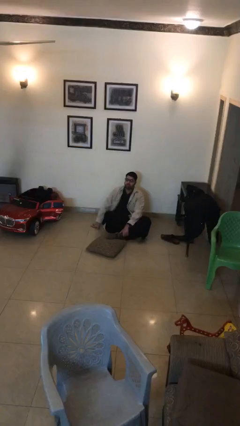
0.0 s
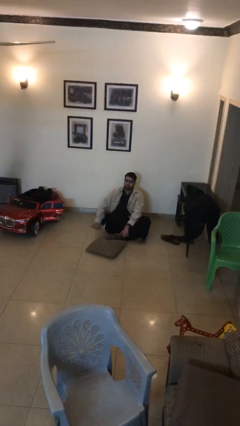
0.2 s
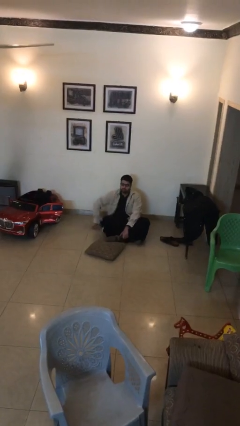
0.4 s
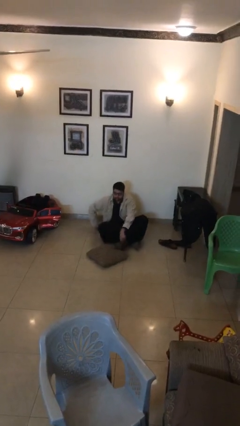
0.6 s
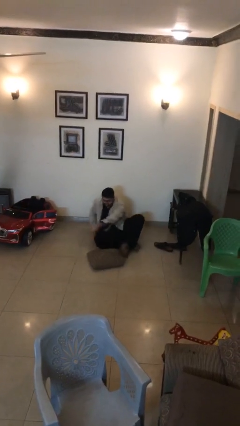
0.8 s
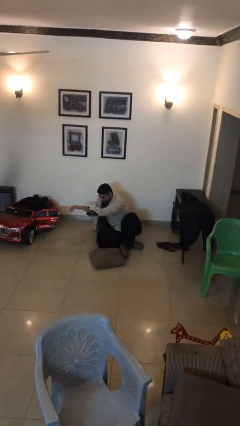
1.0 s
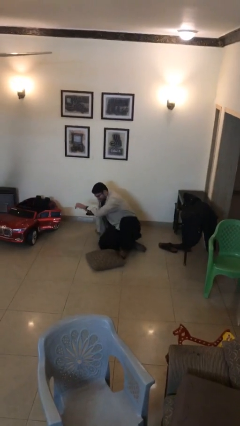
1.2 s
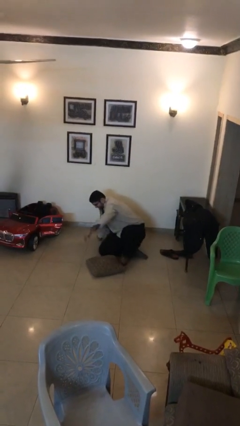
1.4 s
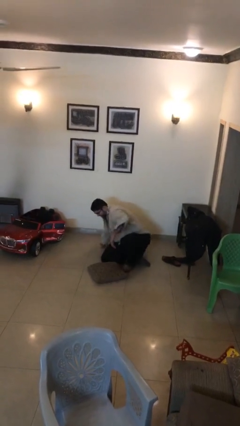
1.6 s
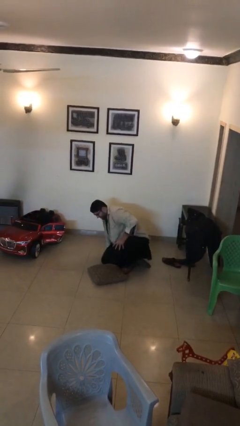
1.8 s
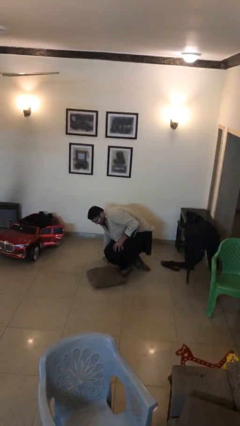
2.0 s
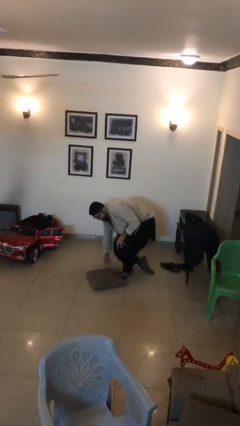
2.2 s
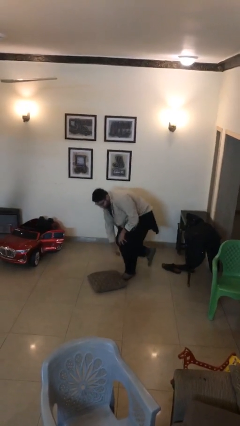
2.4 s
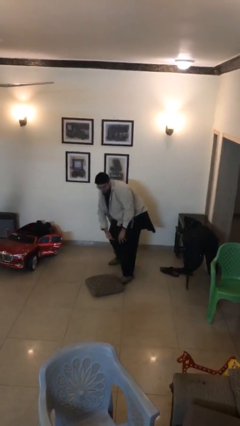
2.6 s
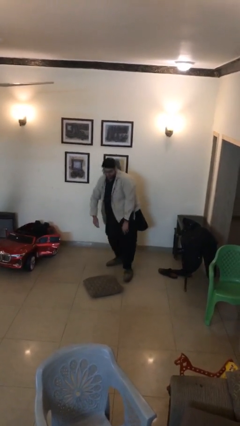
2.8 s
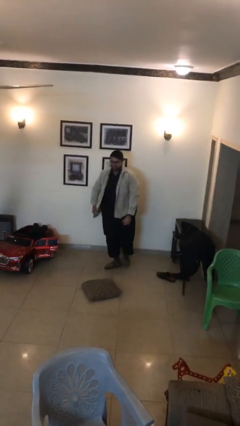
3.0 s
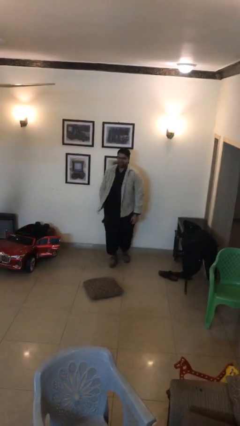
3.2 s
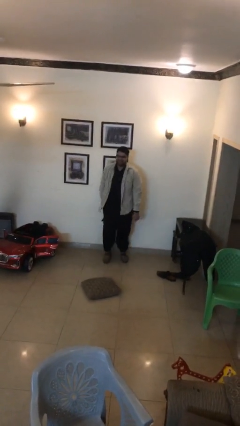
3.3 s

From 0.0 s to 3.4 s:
person stands up

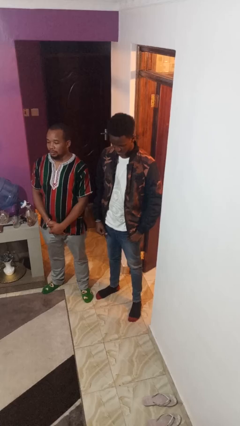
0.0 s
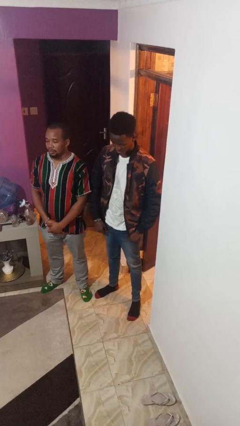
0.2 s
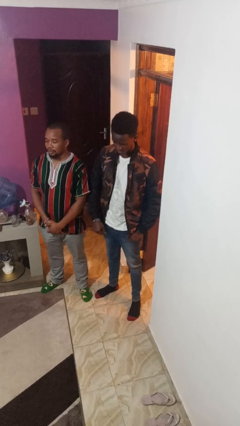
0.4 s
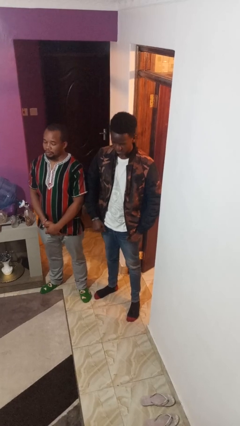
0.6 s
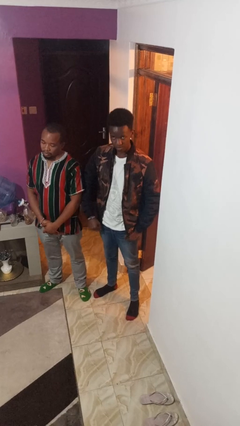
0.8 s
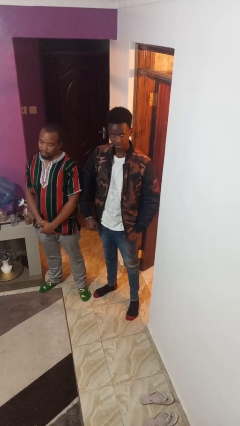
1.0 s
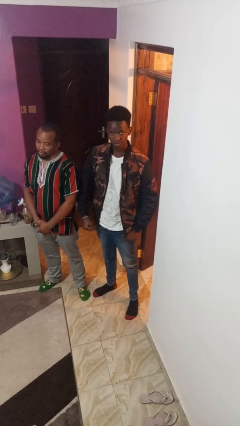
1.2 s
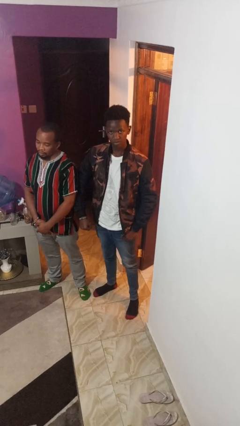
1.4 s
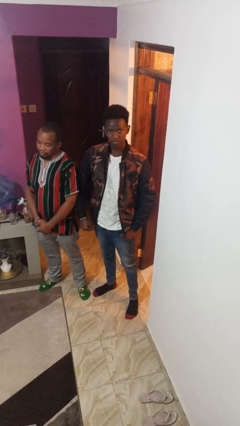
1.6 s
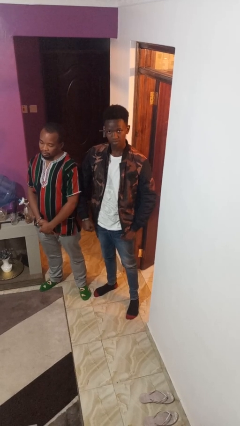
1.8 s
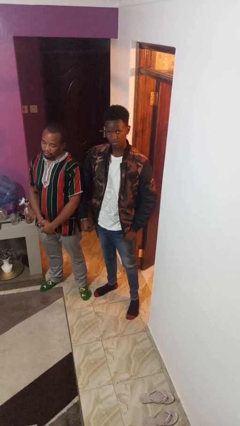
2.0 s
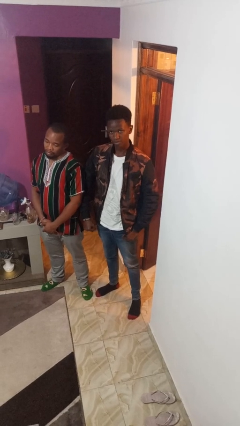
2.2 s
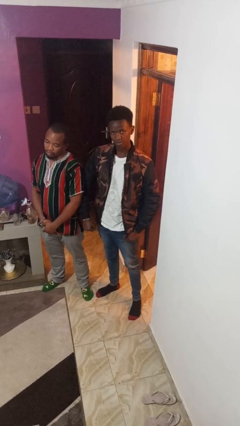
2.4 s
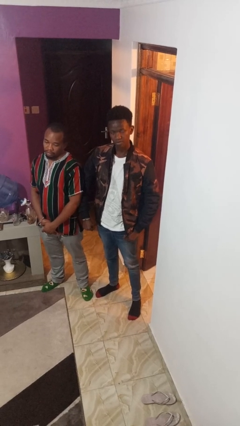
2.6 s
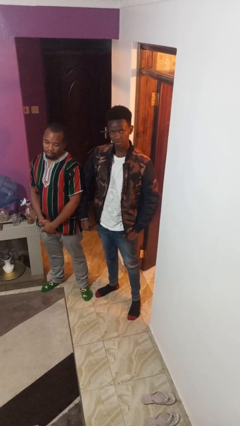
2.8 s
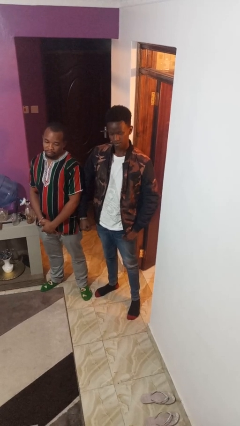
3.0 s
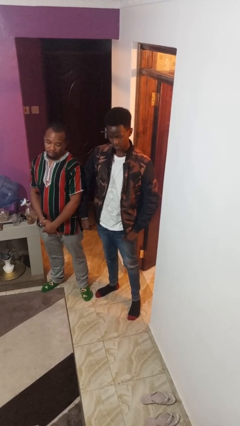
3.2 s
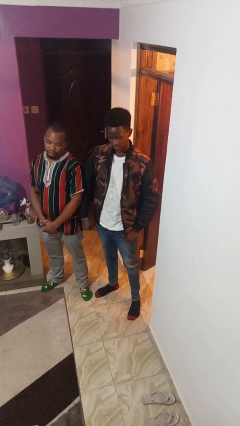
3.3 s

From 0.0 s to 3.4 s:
person nudges person with elbow

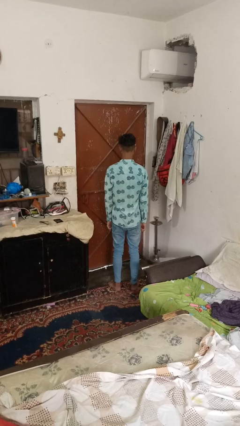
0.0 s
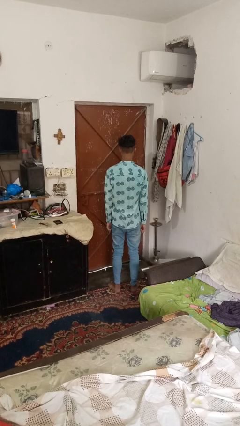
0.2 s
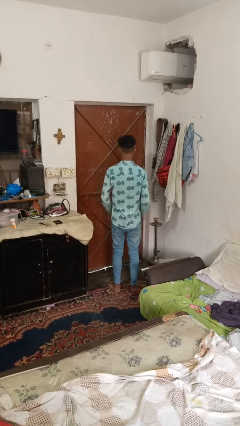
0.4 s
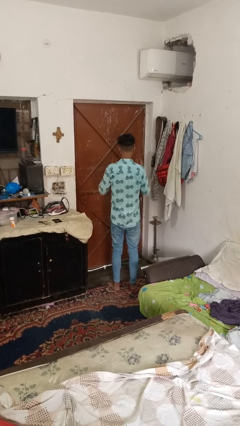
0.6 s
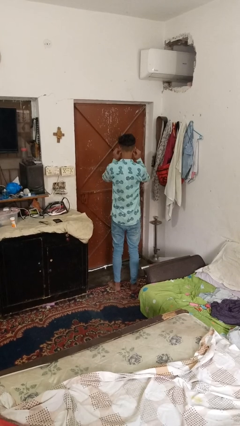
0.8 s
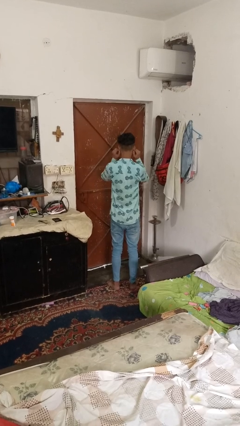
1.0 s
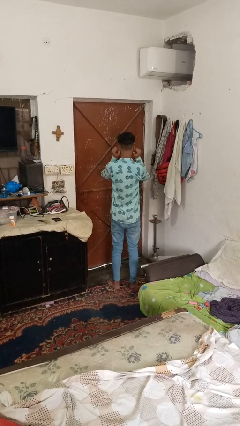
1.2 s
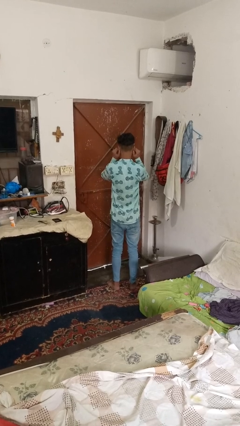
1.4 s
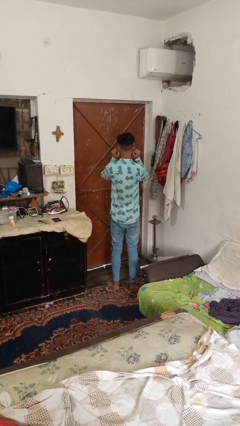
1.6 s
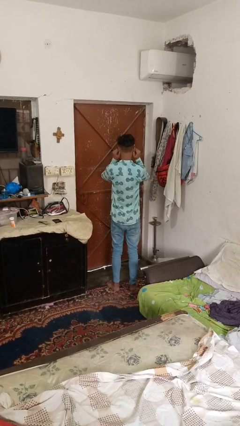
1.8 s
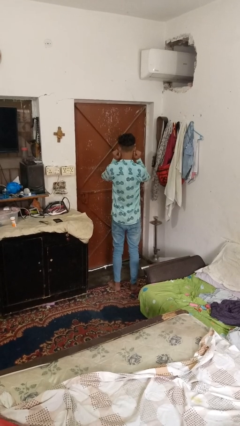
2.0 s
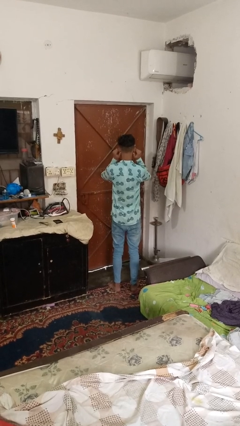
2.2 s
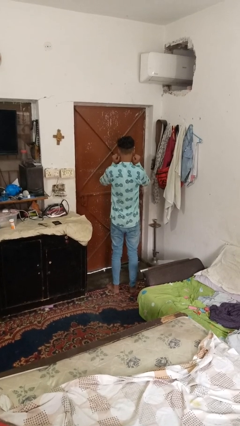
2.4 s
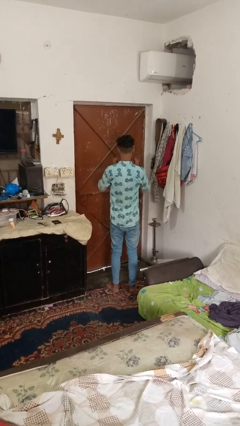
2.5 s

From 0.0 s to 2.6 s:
person touches earlobe

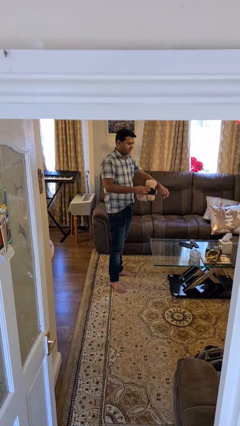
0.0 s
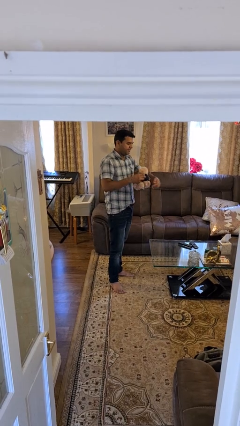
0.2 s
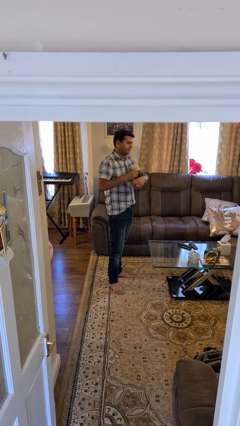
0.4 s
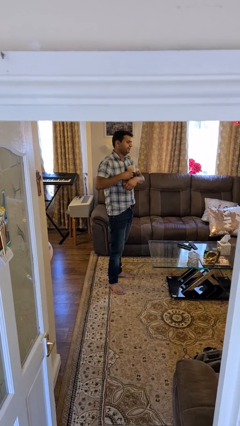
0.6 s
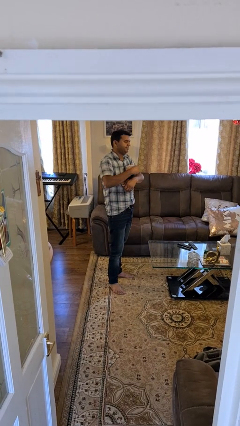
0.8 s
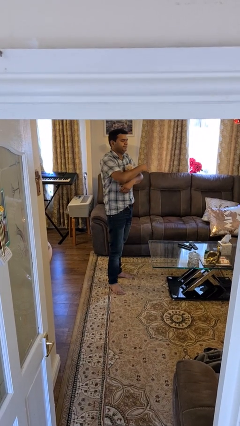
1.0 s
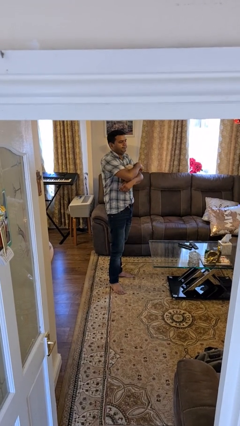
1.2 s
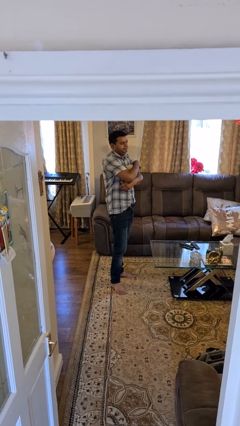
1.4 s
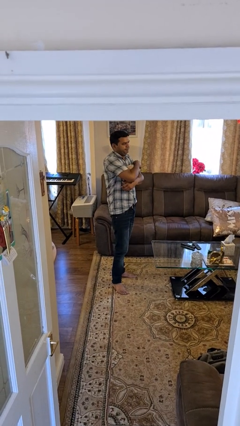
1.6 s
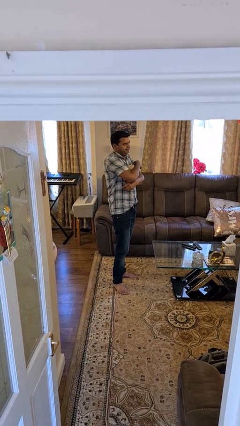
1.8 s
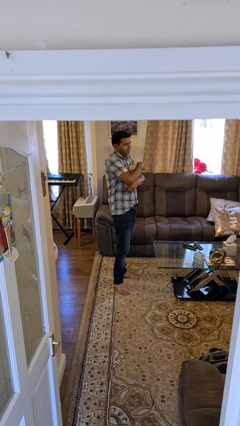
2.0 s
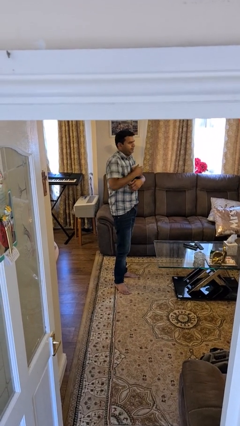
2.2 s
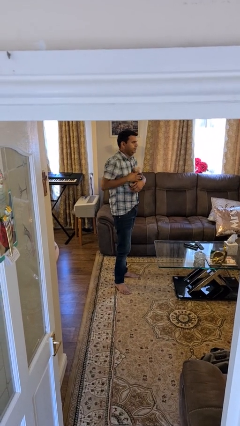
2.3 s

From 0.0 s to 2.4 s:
person hugs stuffed animal

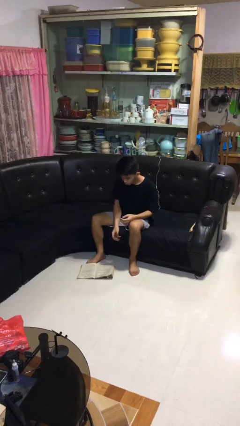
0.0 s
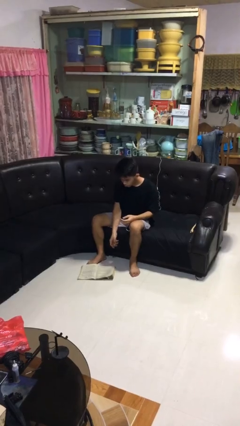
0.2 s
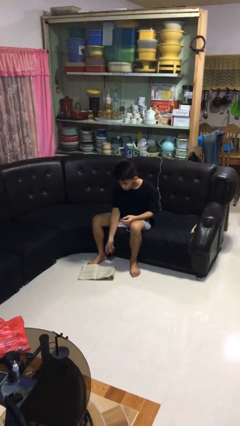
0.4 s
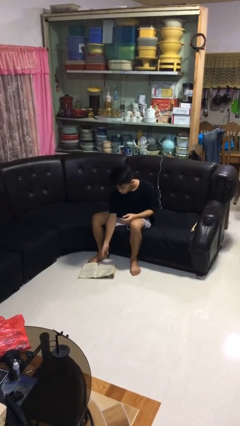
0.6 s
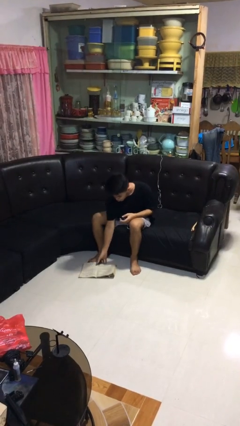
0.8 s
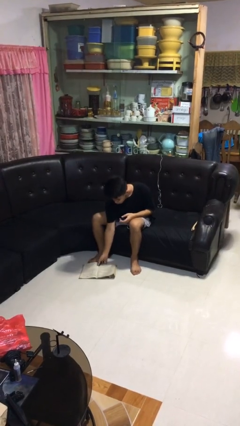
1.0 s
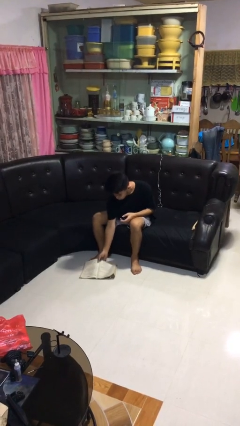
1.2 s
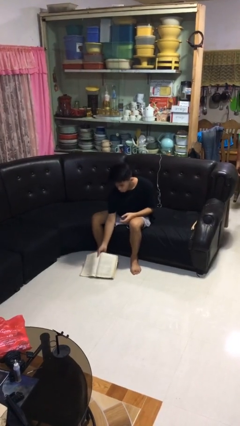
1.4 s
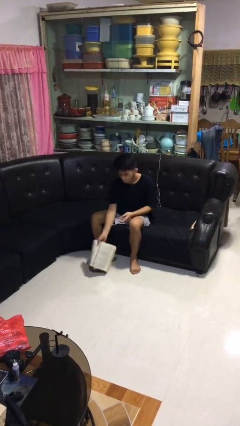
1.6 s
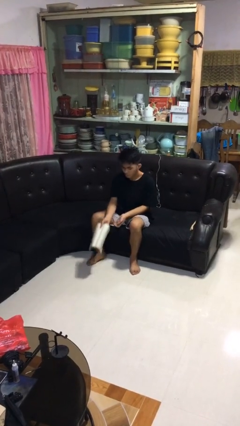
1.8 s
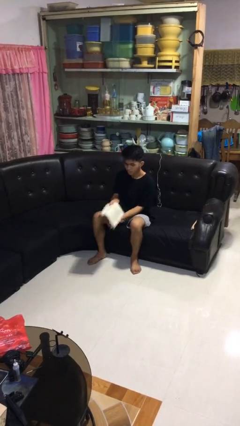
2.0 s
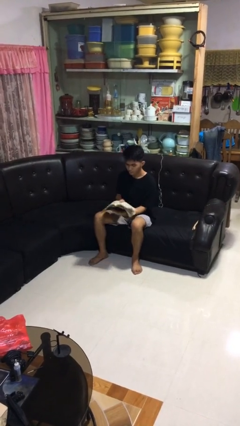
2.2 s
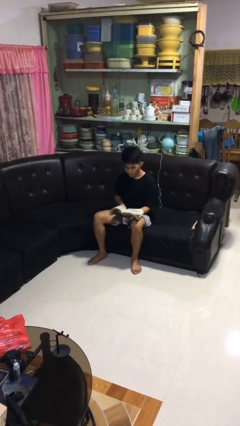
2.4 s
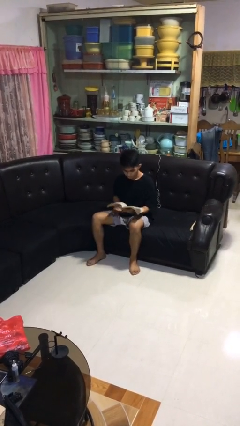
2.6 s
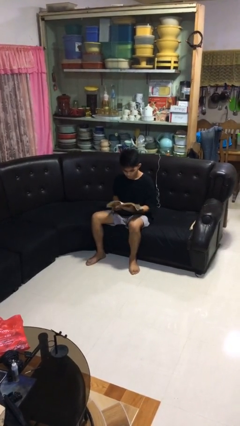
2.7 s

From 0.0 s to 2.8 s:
person picks up object from floor

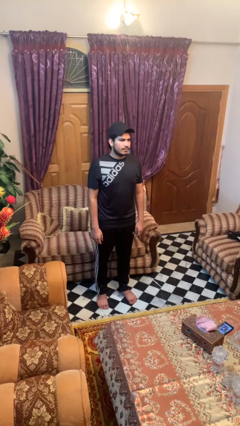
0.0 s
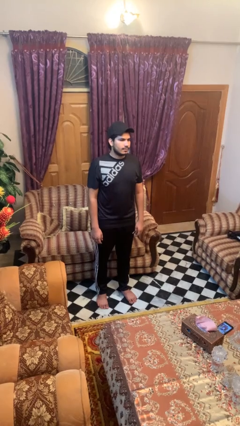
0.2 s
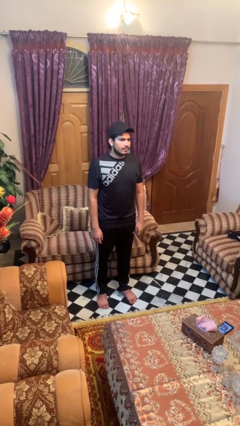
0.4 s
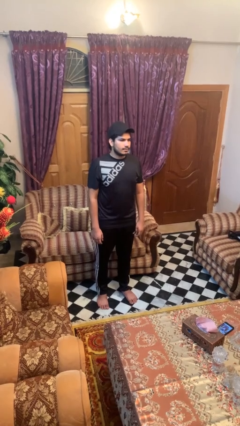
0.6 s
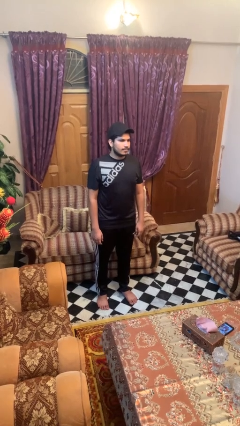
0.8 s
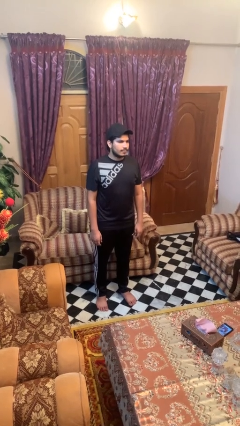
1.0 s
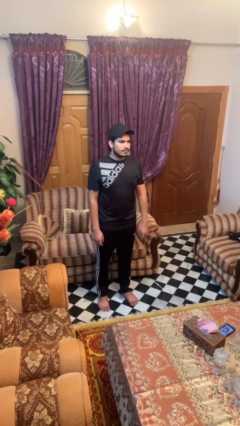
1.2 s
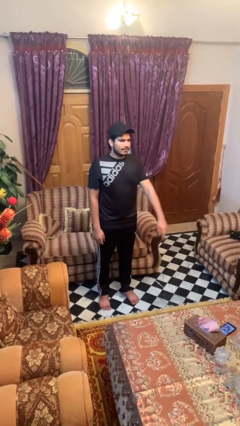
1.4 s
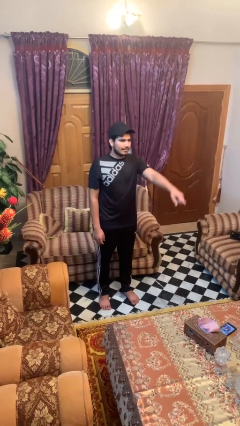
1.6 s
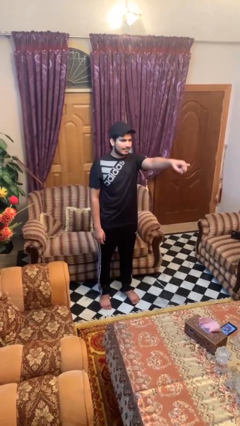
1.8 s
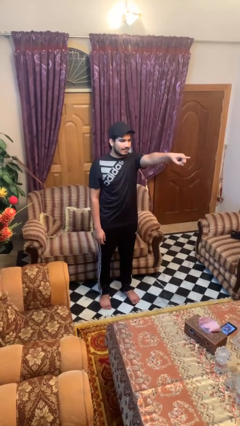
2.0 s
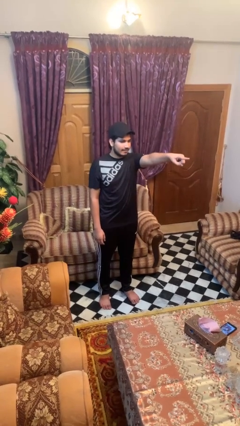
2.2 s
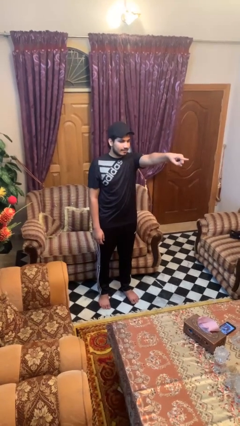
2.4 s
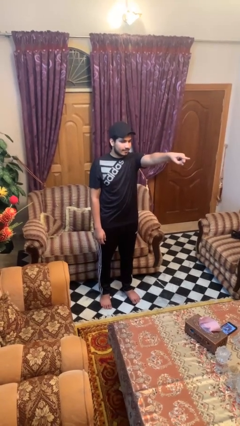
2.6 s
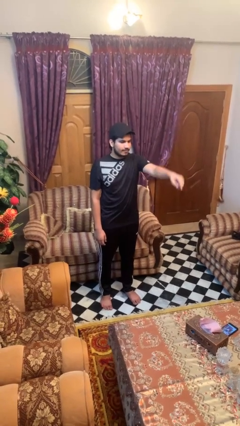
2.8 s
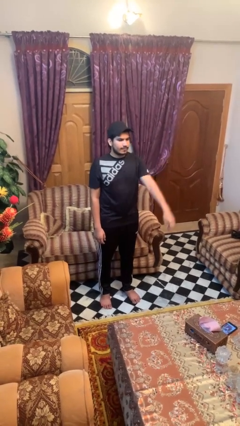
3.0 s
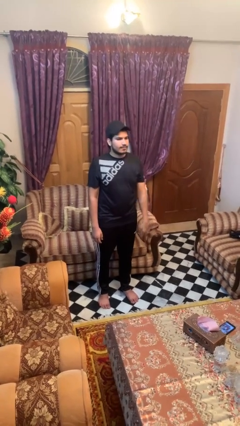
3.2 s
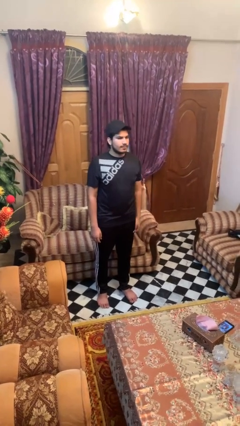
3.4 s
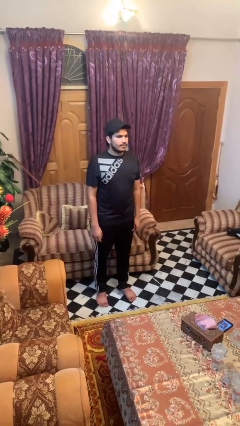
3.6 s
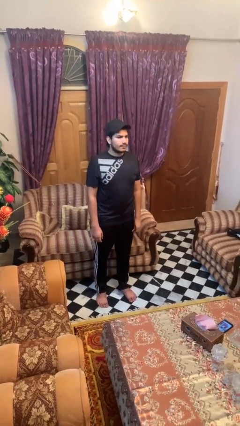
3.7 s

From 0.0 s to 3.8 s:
person points at person
